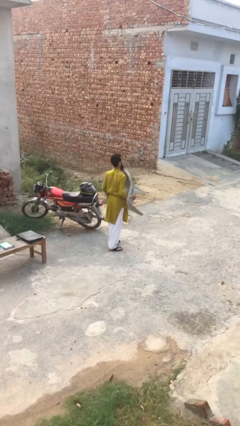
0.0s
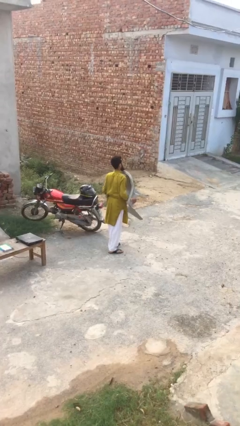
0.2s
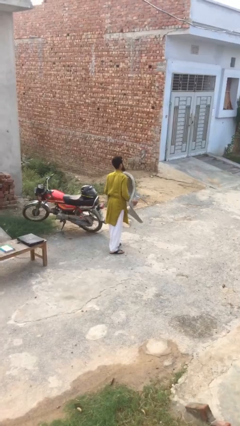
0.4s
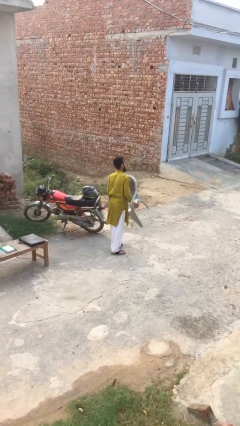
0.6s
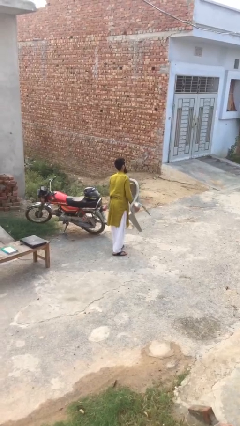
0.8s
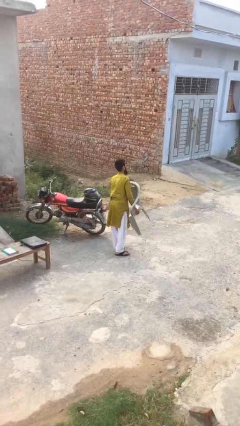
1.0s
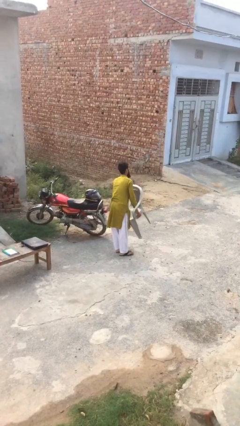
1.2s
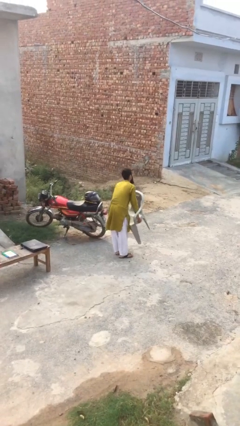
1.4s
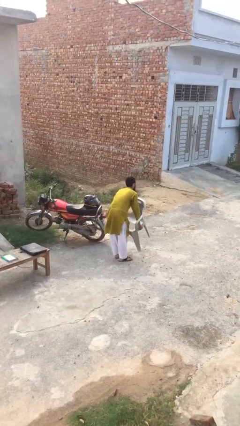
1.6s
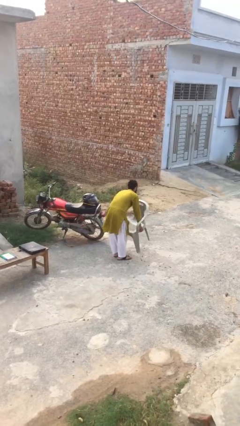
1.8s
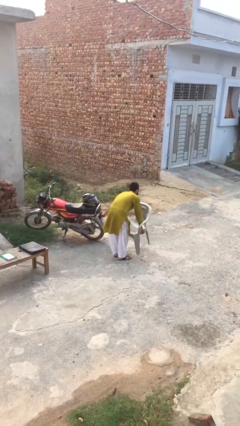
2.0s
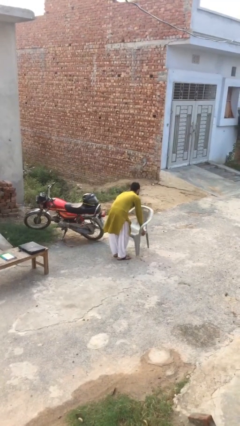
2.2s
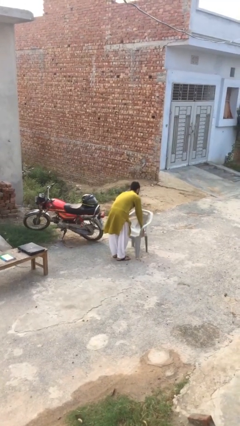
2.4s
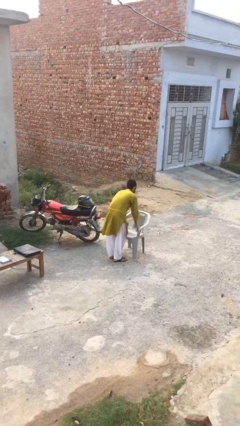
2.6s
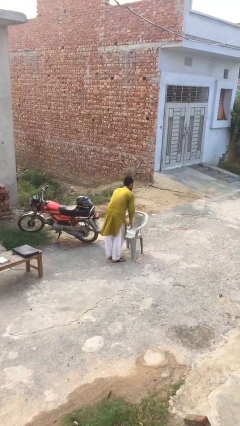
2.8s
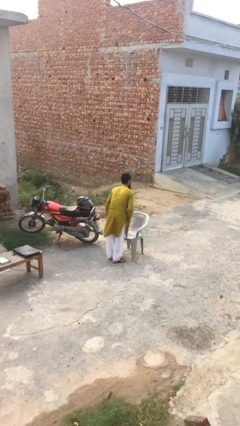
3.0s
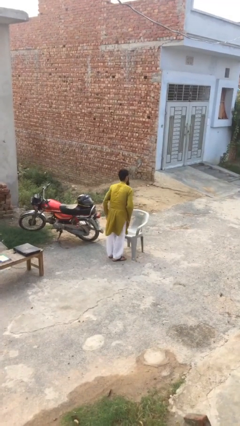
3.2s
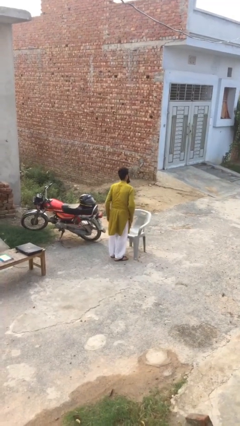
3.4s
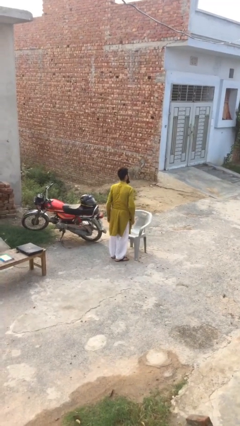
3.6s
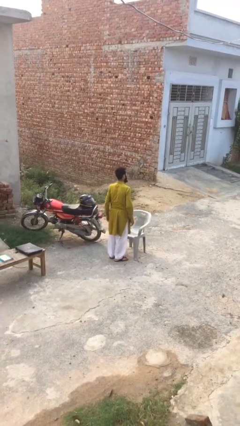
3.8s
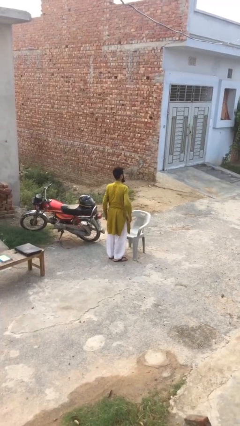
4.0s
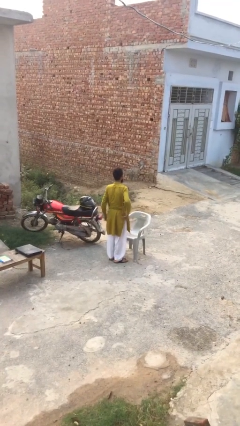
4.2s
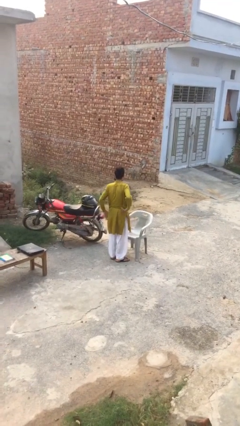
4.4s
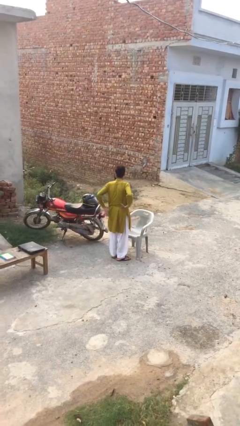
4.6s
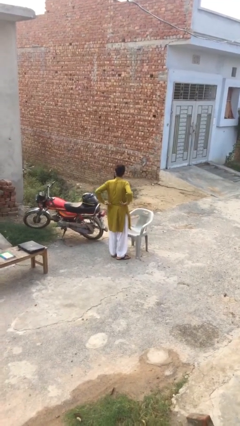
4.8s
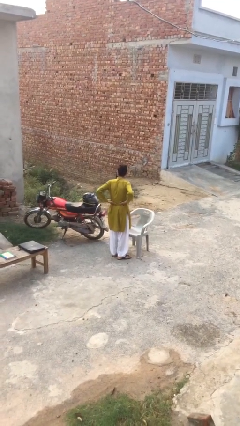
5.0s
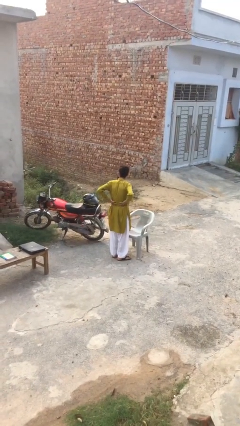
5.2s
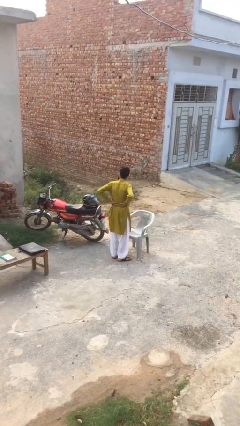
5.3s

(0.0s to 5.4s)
person puts down object on floor

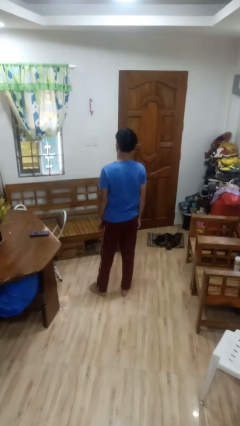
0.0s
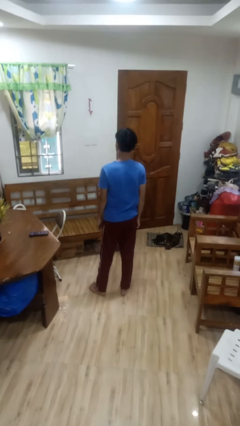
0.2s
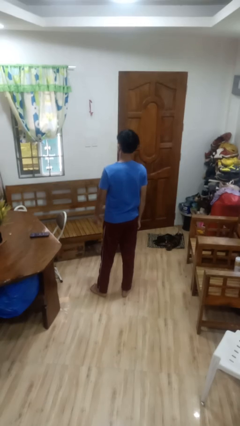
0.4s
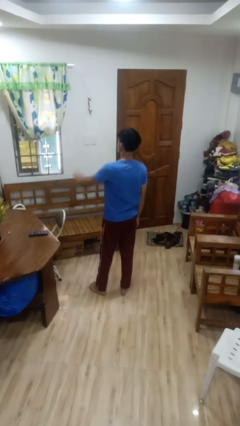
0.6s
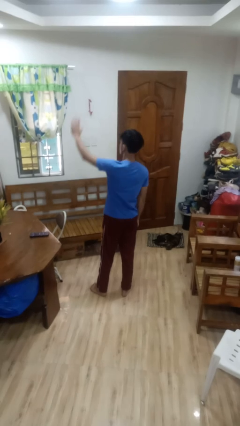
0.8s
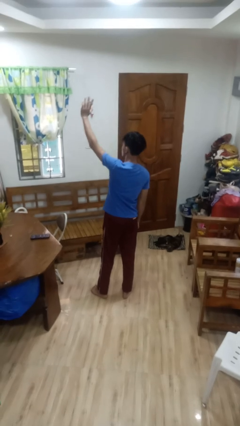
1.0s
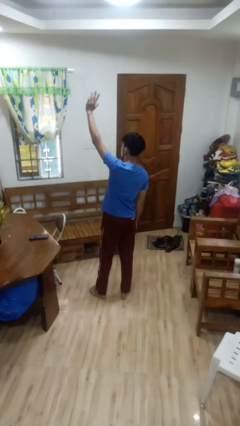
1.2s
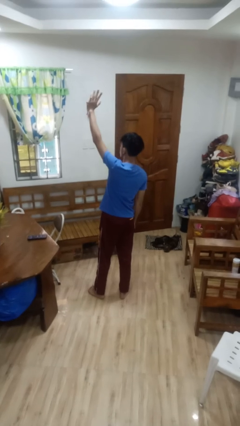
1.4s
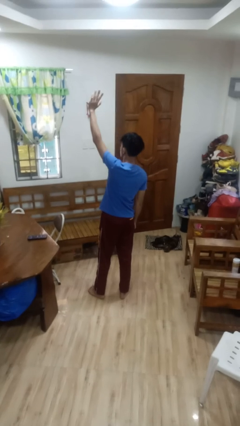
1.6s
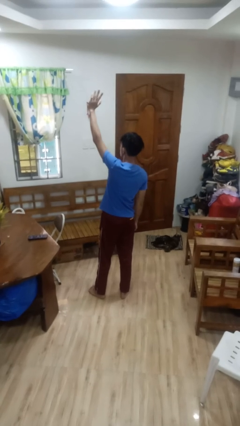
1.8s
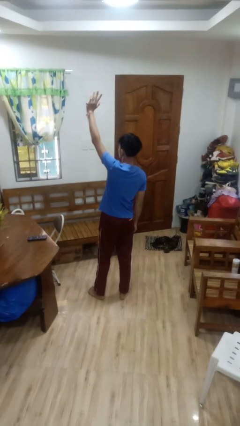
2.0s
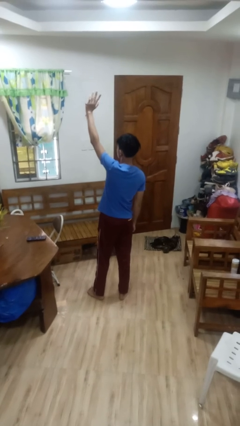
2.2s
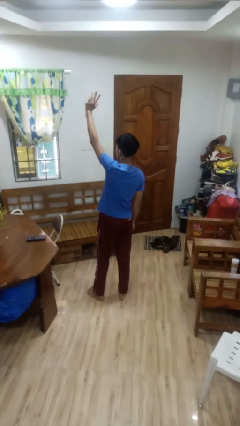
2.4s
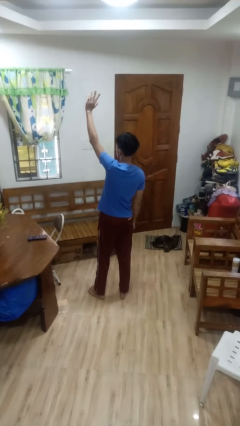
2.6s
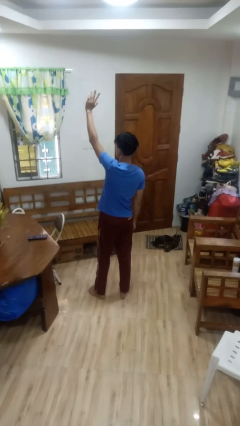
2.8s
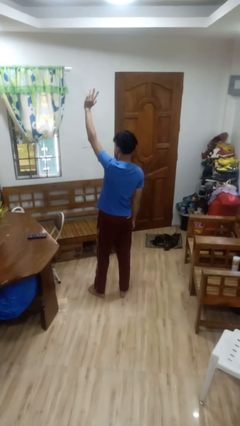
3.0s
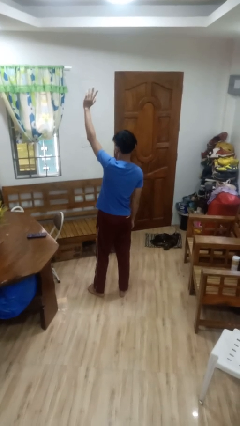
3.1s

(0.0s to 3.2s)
person gestures raise hand

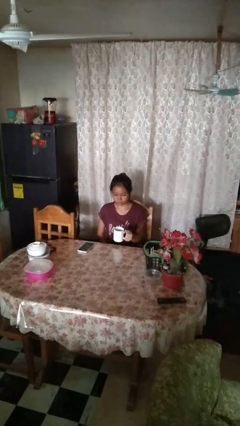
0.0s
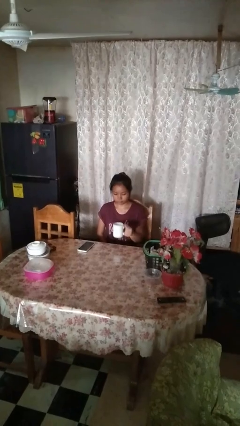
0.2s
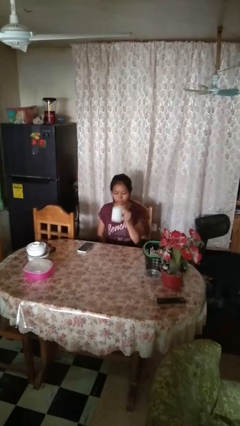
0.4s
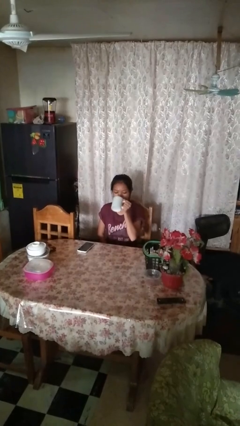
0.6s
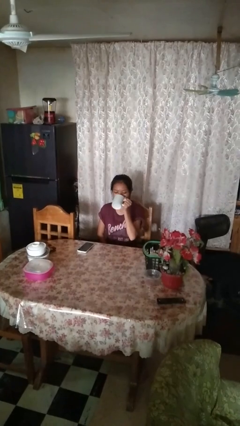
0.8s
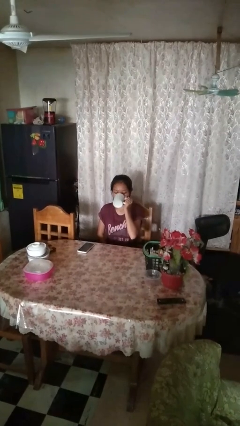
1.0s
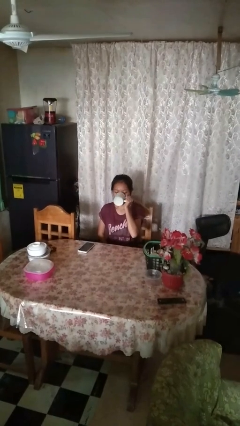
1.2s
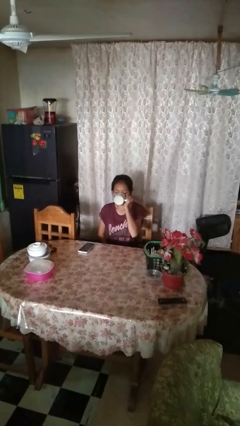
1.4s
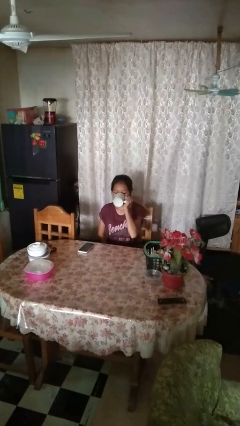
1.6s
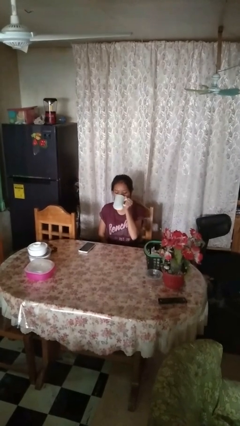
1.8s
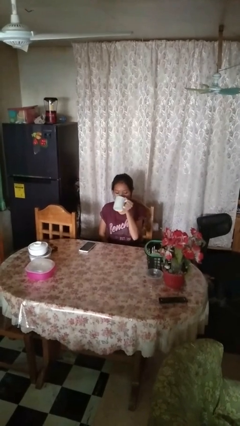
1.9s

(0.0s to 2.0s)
person drinks from mug

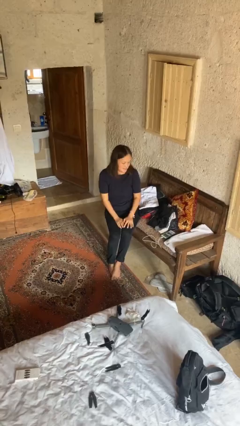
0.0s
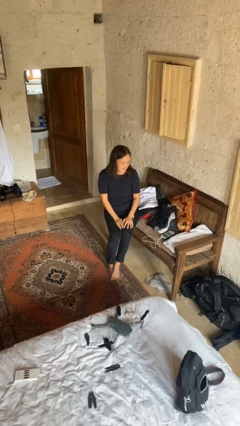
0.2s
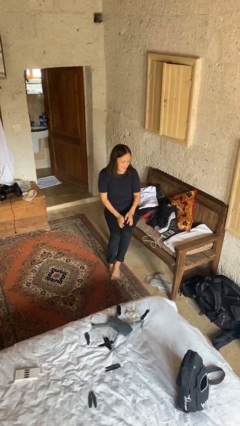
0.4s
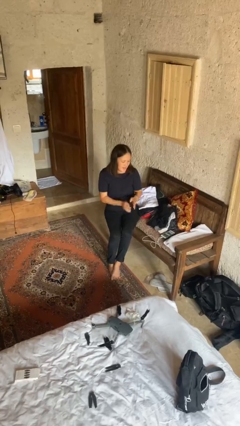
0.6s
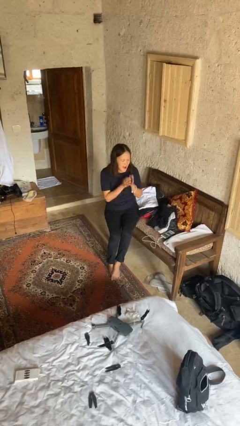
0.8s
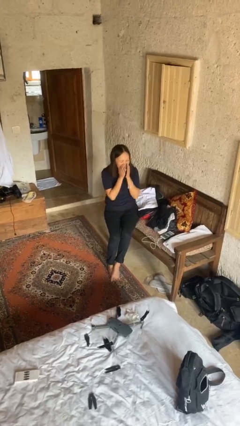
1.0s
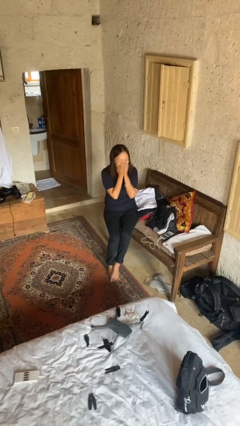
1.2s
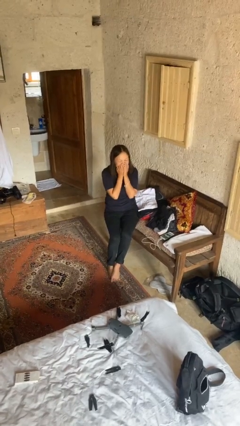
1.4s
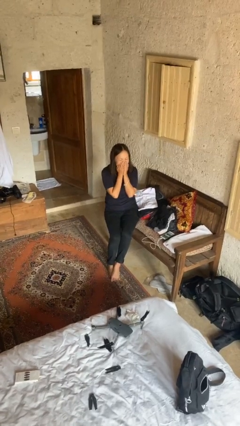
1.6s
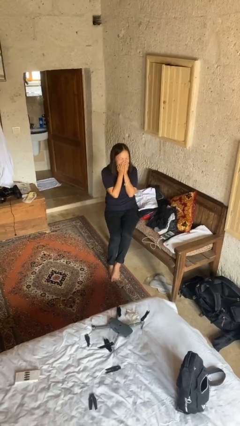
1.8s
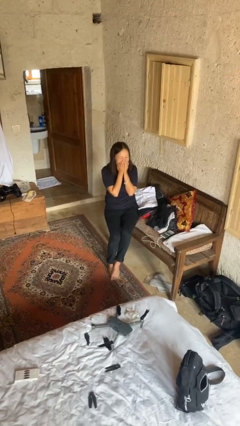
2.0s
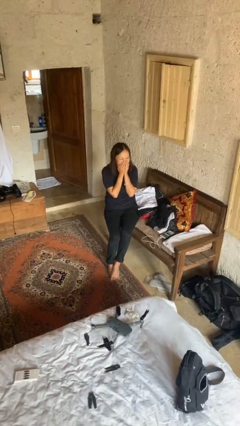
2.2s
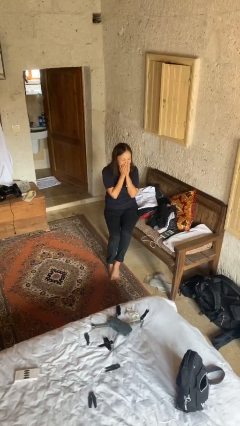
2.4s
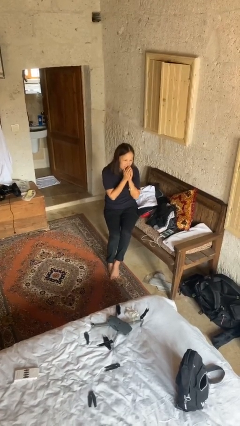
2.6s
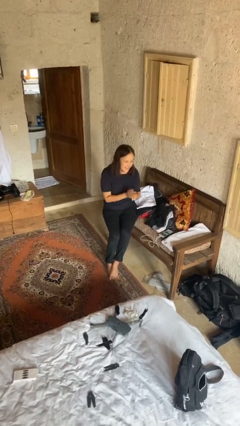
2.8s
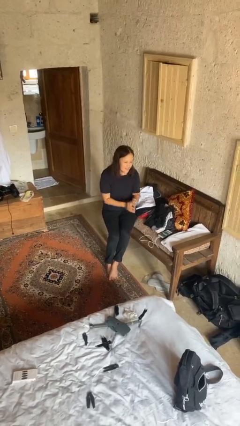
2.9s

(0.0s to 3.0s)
person yawns

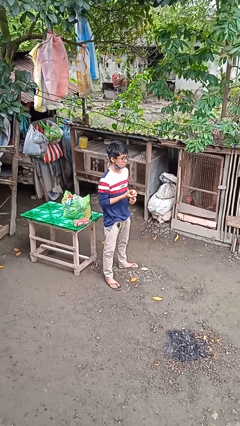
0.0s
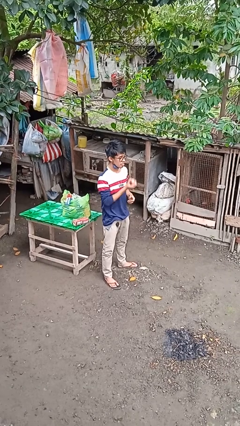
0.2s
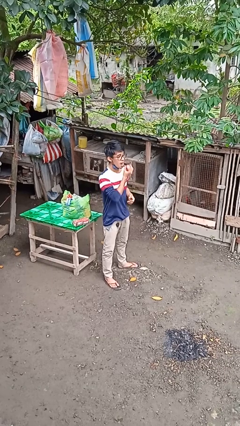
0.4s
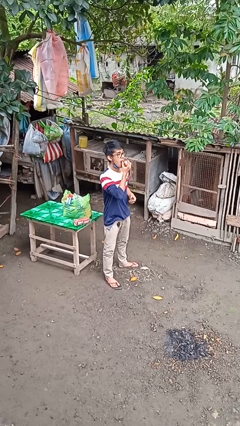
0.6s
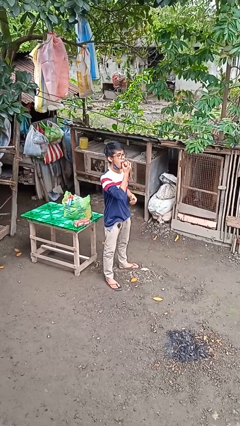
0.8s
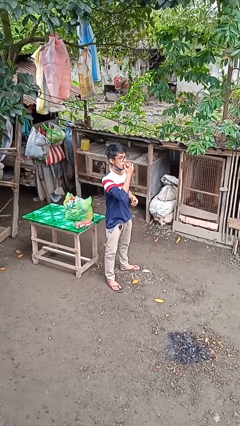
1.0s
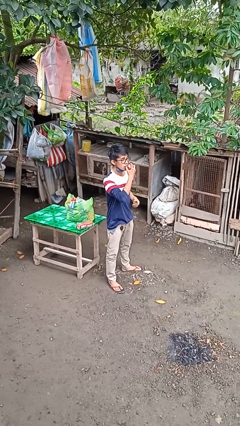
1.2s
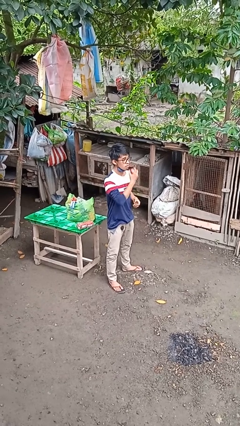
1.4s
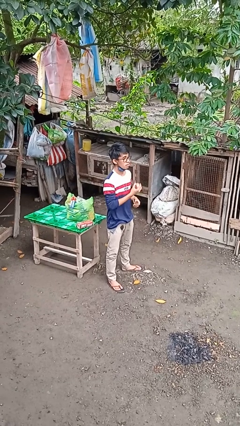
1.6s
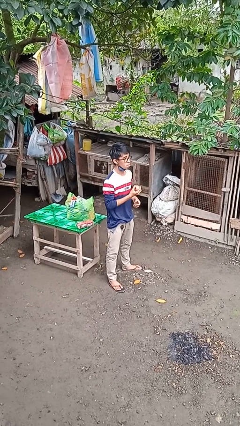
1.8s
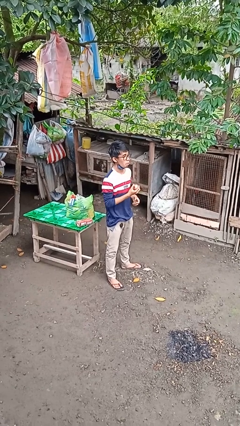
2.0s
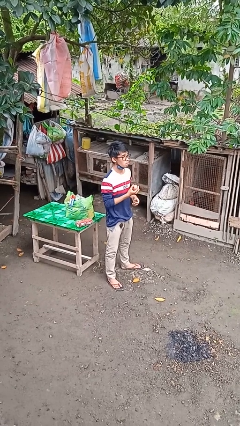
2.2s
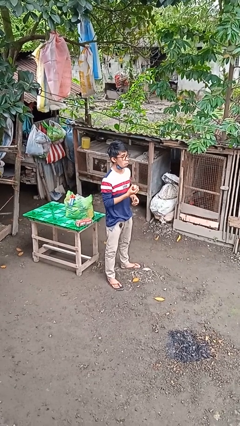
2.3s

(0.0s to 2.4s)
person eats apple

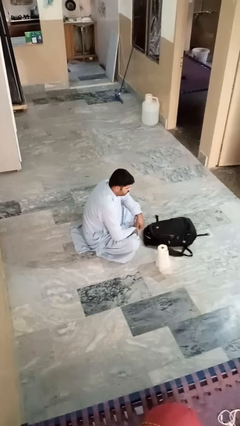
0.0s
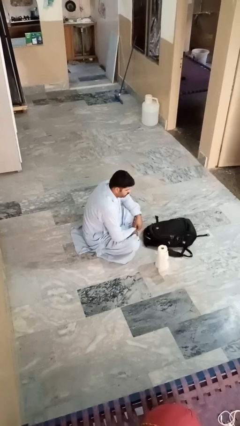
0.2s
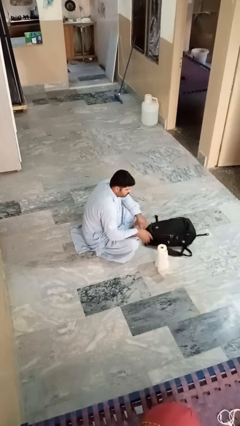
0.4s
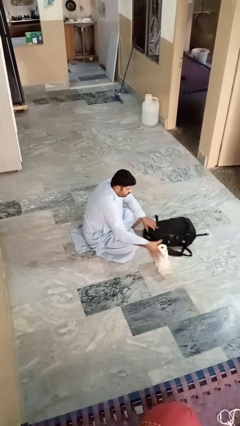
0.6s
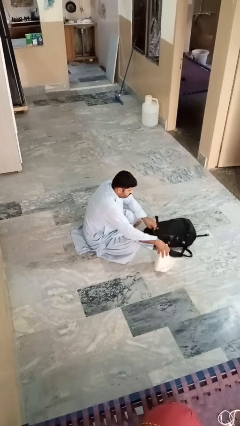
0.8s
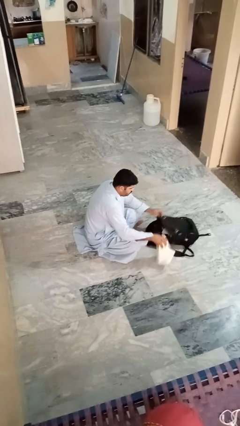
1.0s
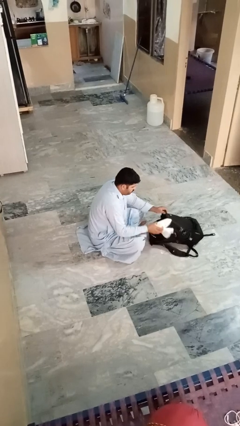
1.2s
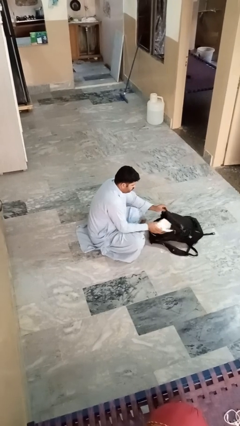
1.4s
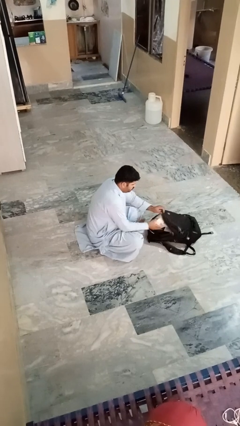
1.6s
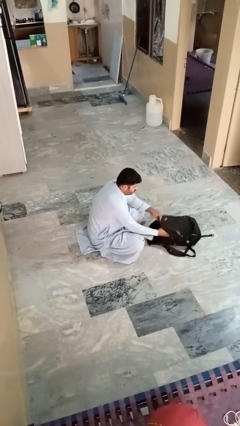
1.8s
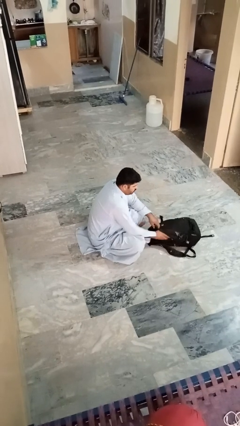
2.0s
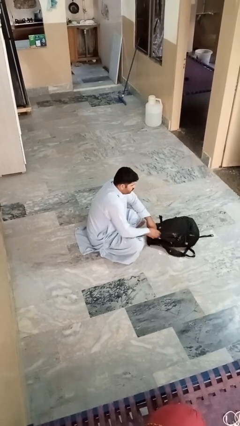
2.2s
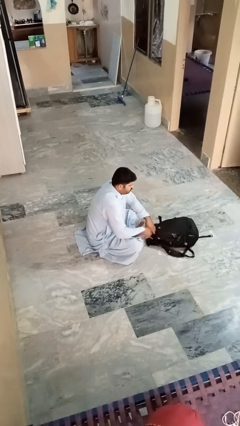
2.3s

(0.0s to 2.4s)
person puts object into bag
